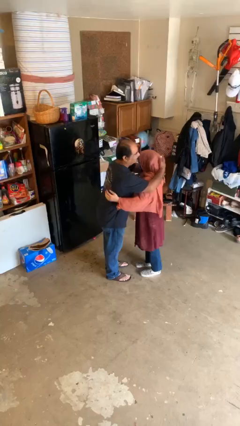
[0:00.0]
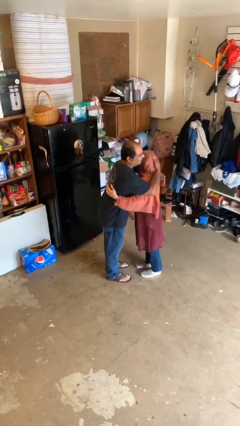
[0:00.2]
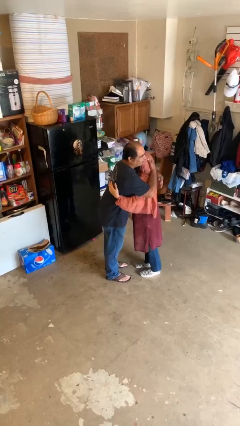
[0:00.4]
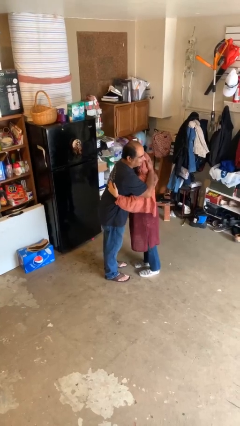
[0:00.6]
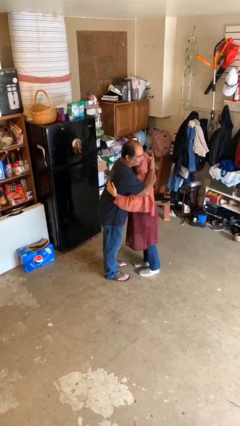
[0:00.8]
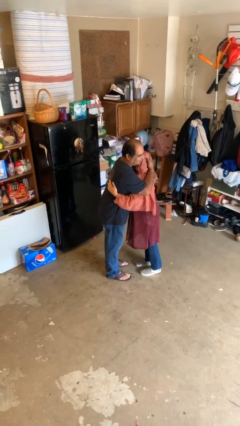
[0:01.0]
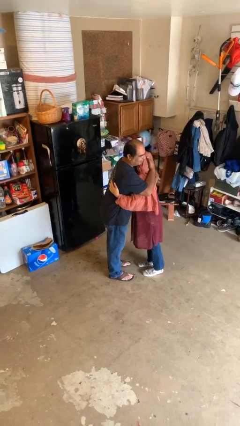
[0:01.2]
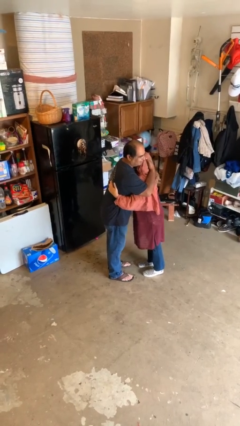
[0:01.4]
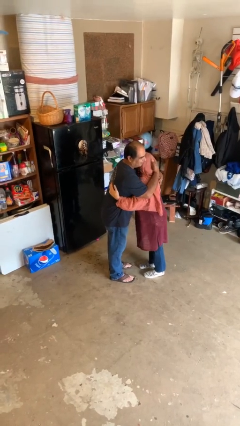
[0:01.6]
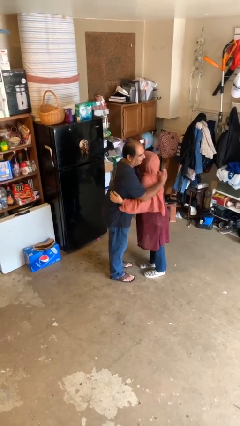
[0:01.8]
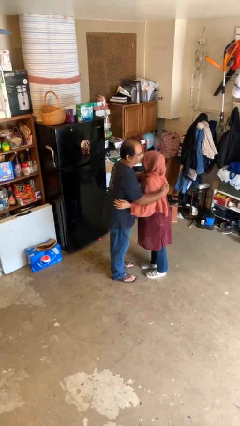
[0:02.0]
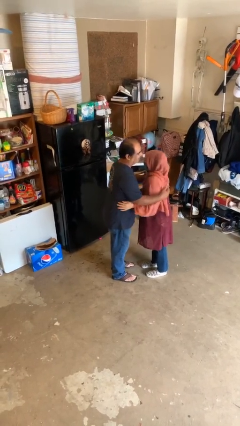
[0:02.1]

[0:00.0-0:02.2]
person embraces person

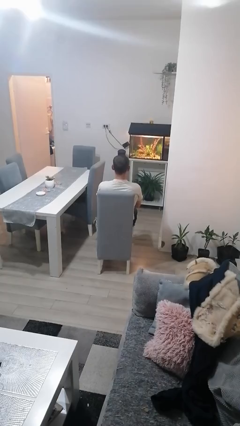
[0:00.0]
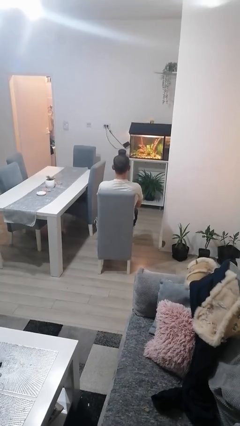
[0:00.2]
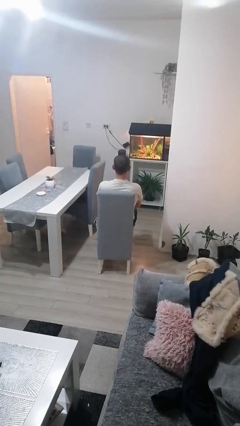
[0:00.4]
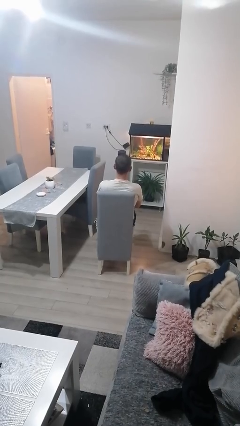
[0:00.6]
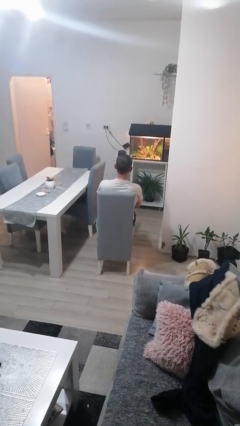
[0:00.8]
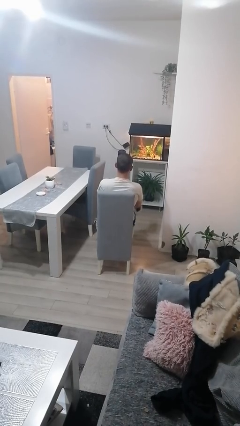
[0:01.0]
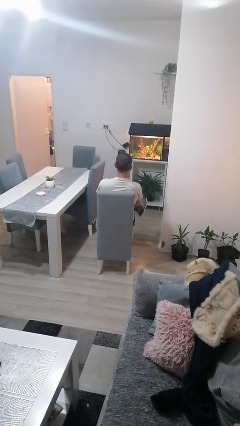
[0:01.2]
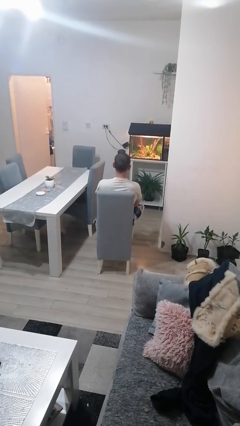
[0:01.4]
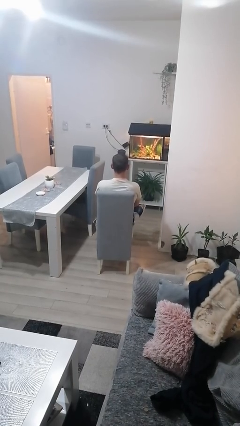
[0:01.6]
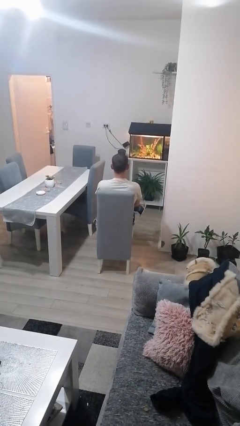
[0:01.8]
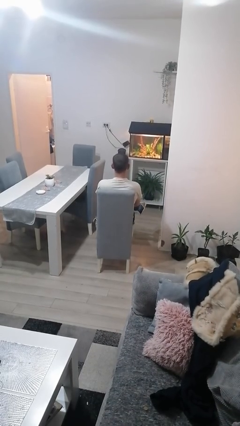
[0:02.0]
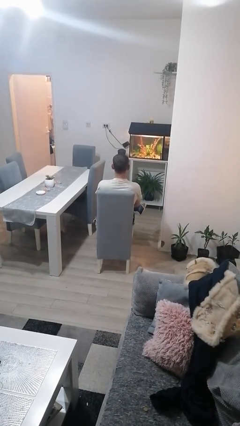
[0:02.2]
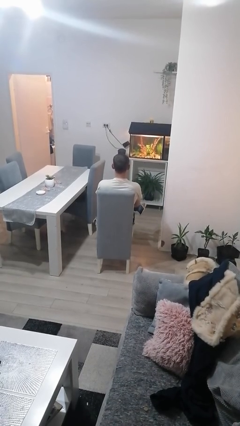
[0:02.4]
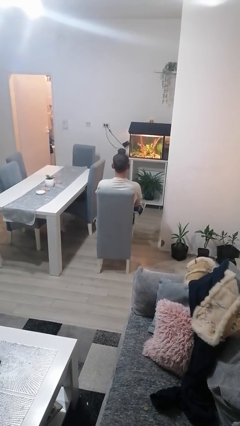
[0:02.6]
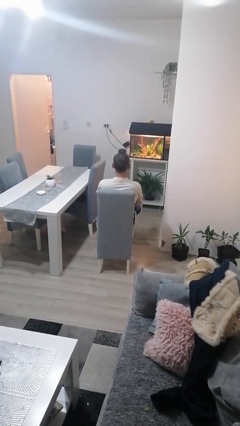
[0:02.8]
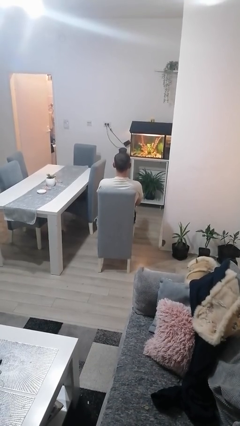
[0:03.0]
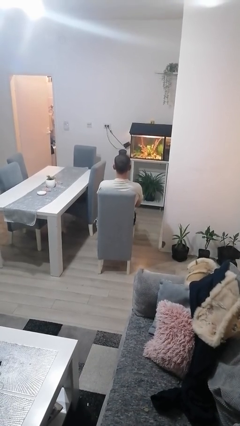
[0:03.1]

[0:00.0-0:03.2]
person crosses legs

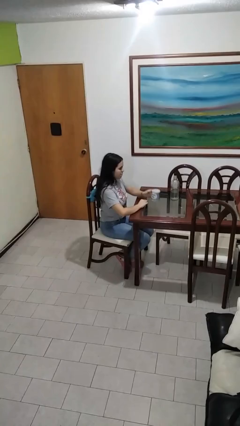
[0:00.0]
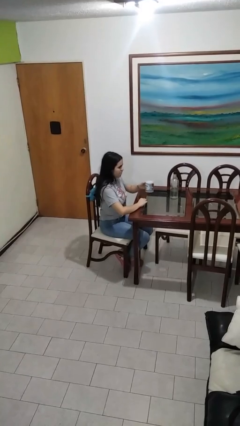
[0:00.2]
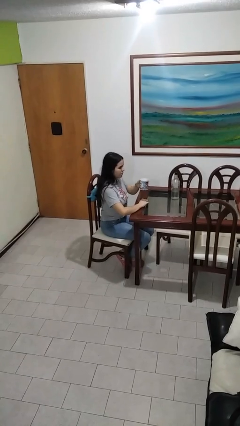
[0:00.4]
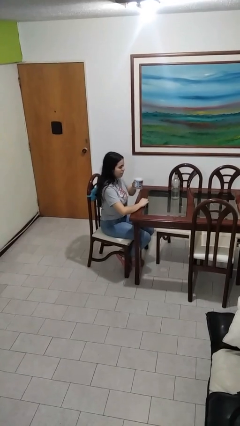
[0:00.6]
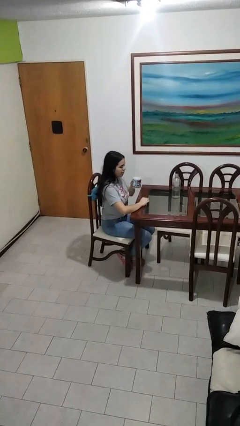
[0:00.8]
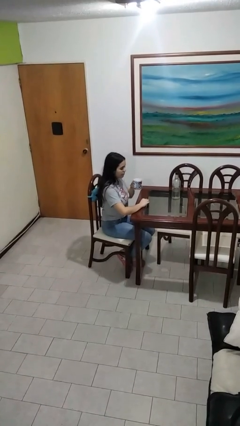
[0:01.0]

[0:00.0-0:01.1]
person picks up object from table

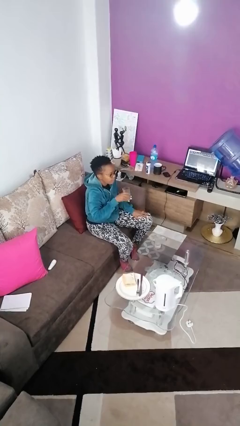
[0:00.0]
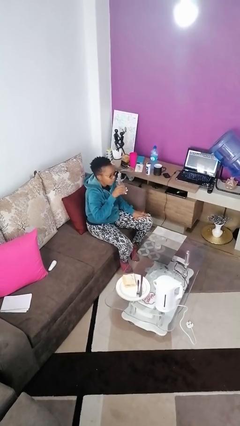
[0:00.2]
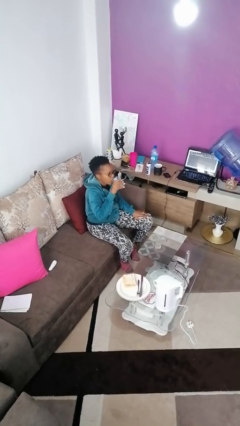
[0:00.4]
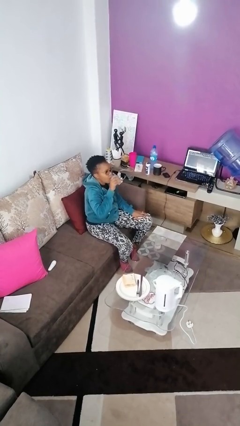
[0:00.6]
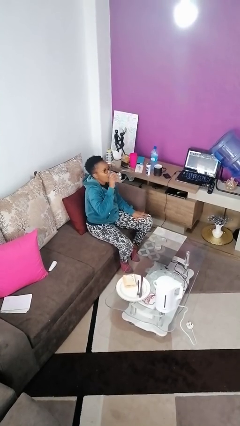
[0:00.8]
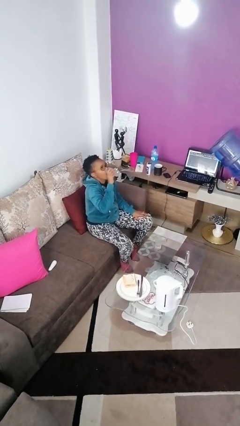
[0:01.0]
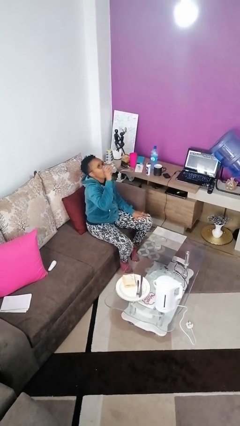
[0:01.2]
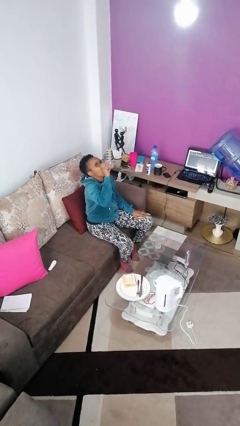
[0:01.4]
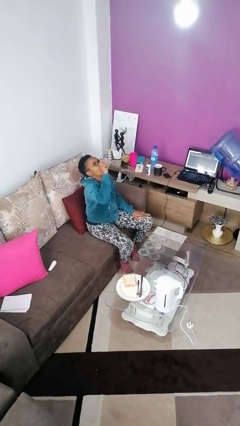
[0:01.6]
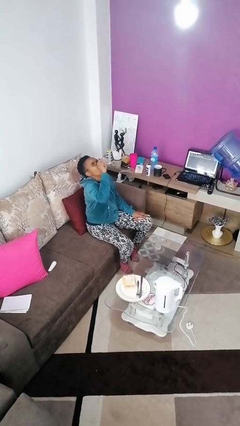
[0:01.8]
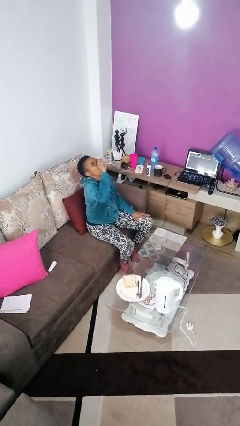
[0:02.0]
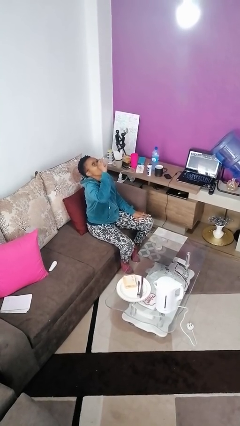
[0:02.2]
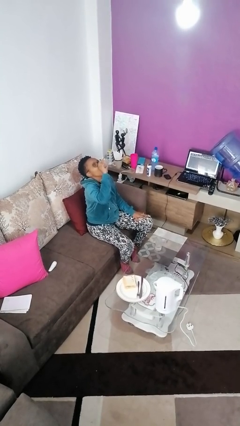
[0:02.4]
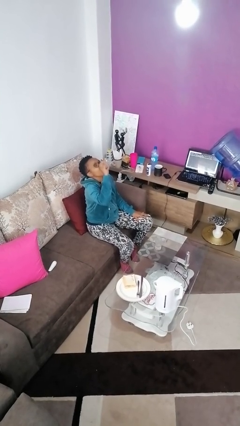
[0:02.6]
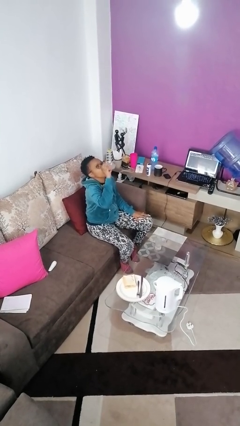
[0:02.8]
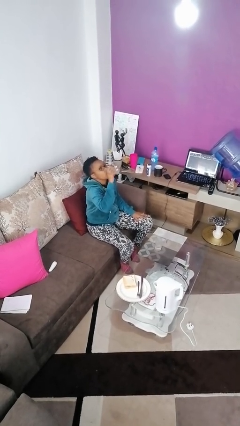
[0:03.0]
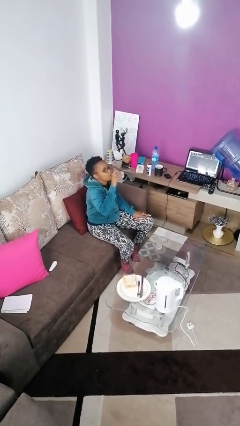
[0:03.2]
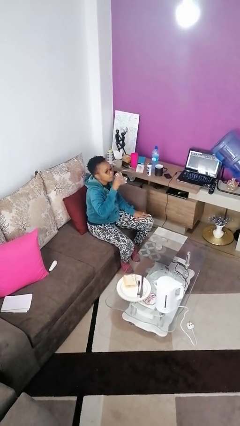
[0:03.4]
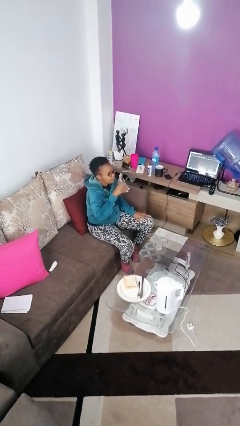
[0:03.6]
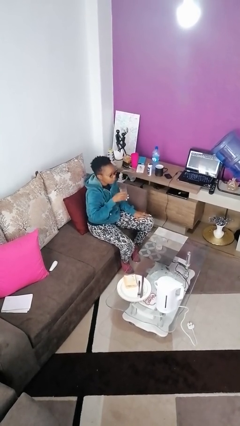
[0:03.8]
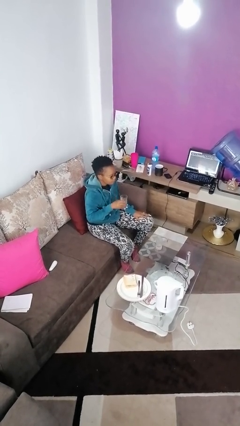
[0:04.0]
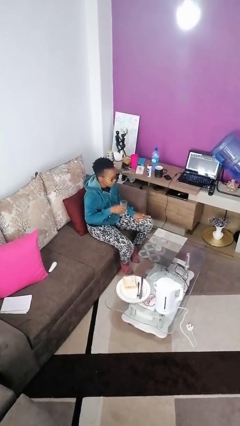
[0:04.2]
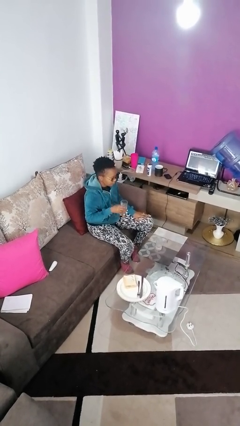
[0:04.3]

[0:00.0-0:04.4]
person drinks from shotglass

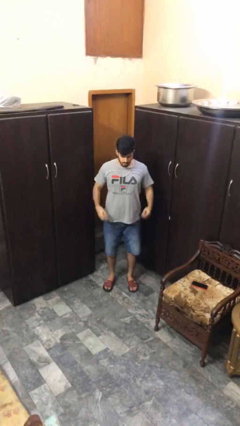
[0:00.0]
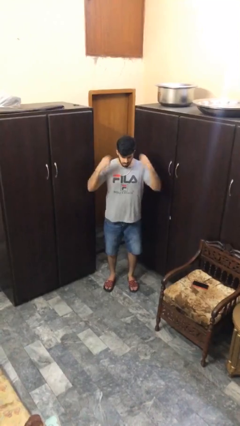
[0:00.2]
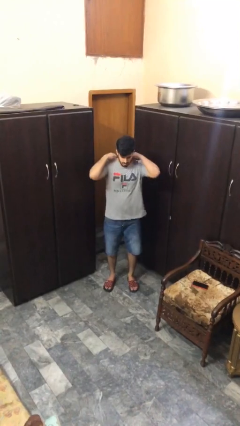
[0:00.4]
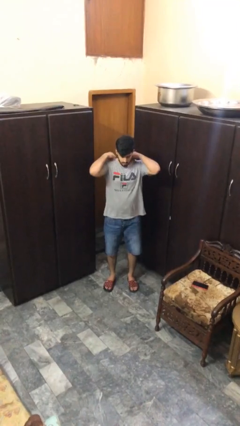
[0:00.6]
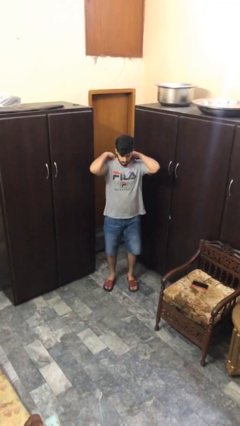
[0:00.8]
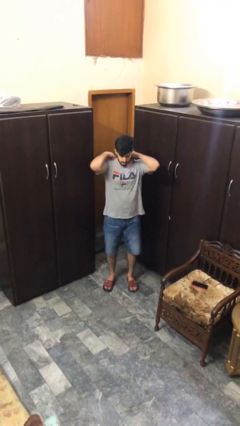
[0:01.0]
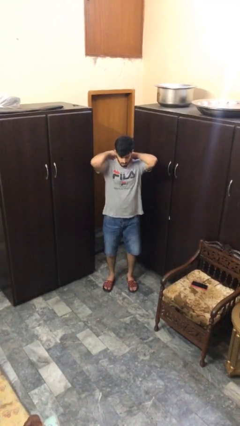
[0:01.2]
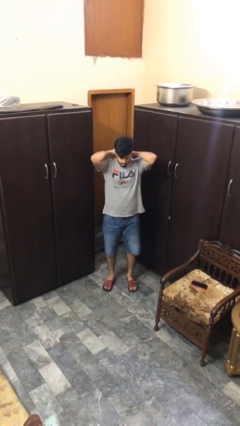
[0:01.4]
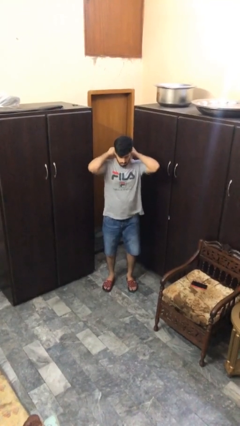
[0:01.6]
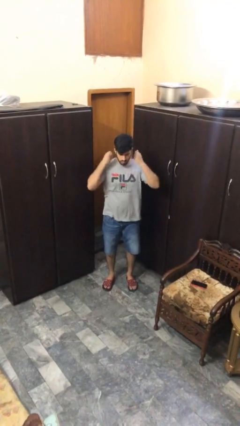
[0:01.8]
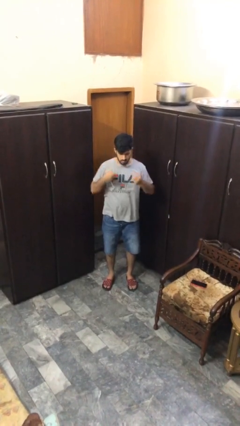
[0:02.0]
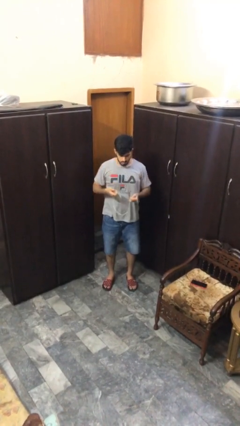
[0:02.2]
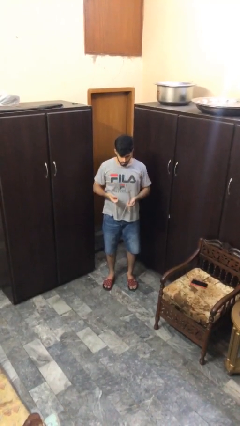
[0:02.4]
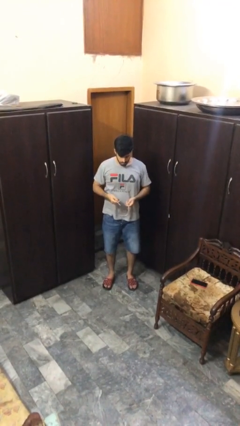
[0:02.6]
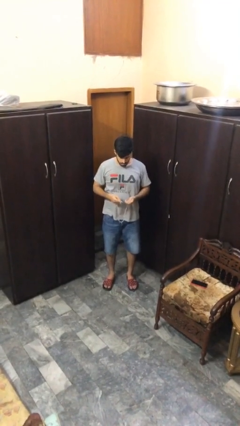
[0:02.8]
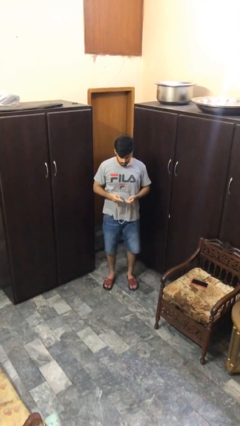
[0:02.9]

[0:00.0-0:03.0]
person takes off necklace

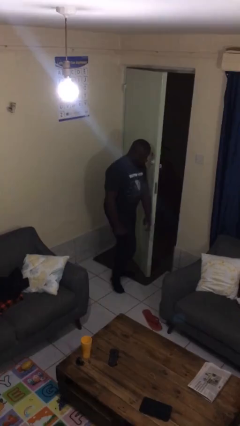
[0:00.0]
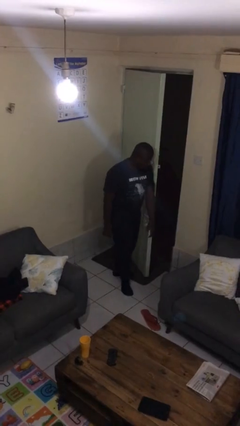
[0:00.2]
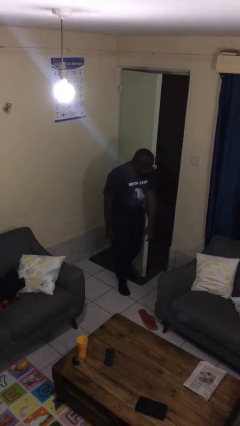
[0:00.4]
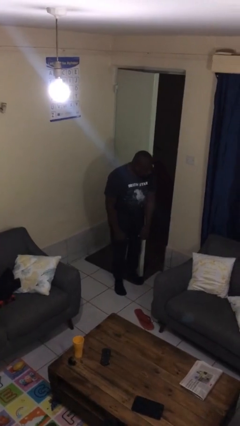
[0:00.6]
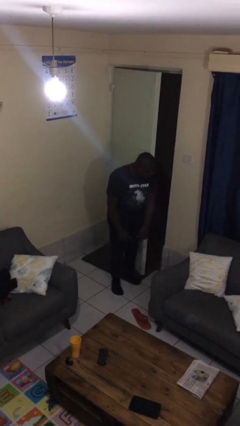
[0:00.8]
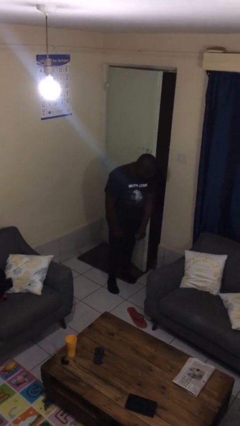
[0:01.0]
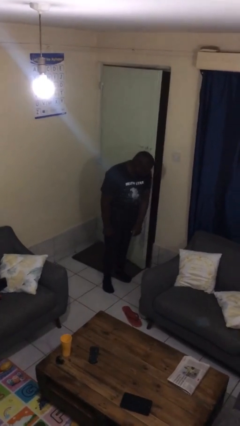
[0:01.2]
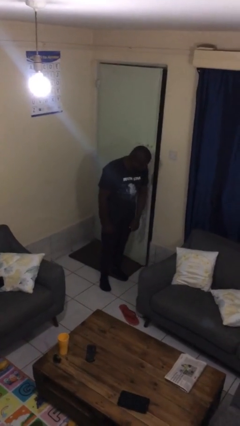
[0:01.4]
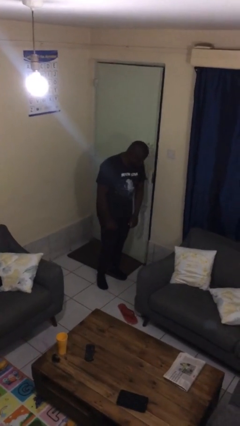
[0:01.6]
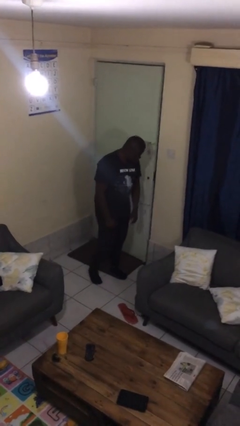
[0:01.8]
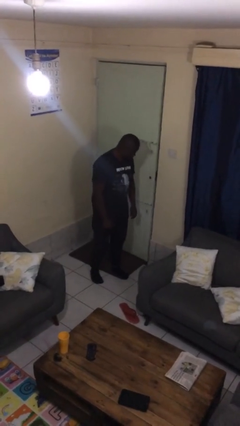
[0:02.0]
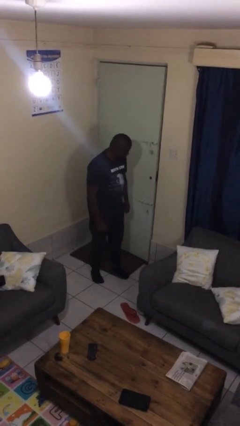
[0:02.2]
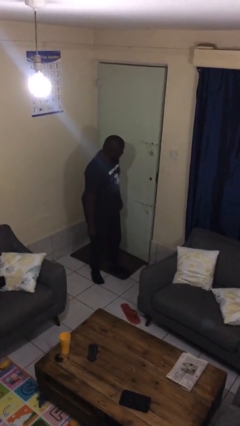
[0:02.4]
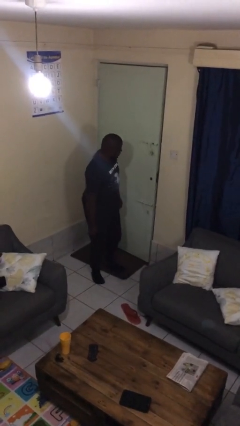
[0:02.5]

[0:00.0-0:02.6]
person closes door with hip

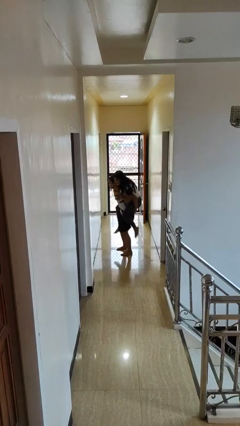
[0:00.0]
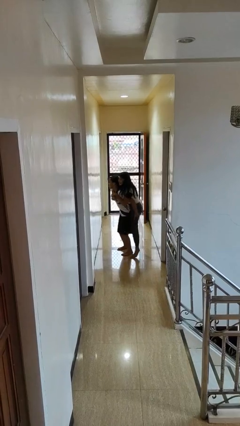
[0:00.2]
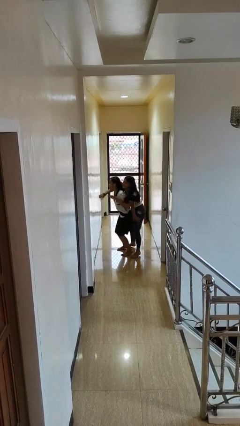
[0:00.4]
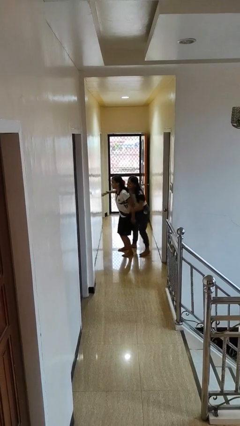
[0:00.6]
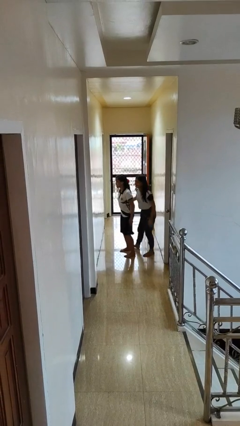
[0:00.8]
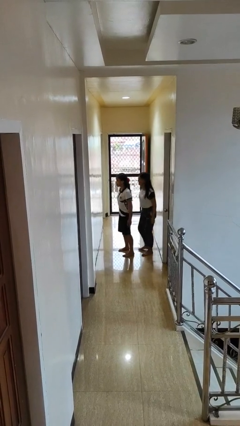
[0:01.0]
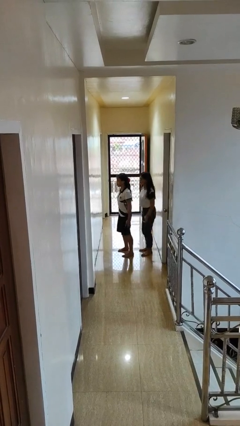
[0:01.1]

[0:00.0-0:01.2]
person puts down person
